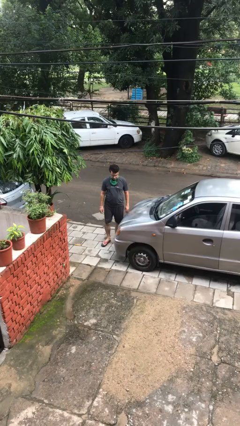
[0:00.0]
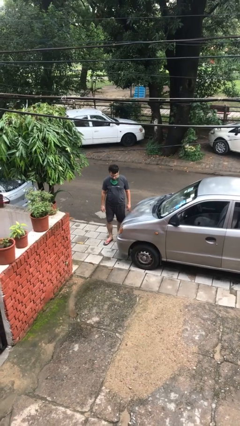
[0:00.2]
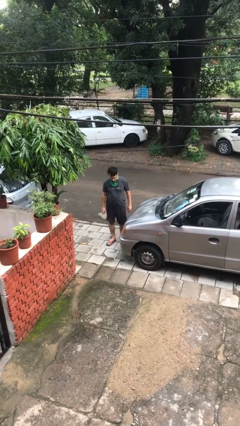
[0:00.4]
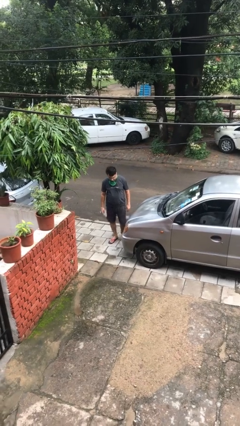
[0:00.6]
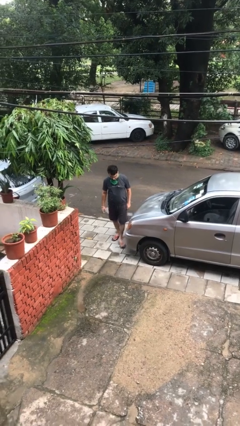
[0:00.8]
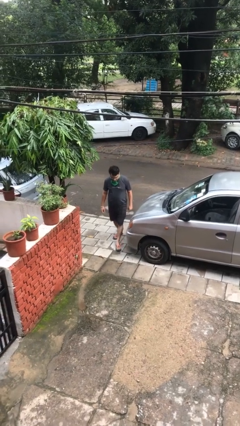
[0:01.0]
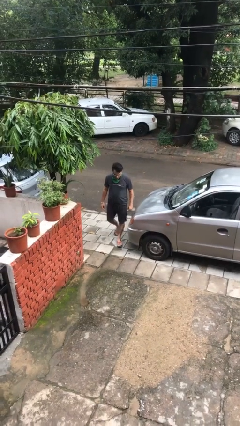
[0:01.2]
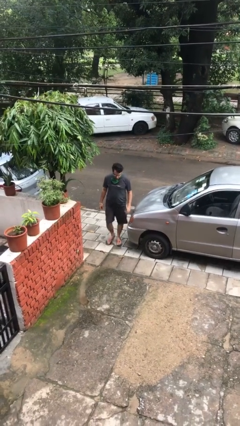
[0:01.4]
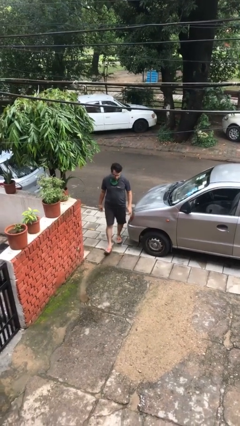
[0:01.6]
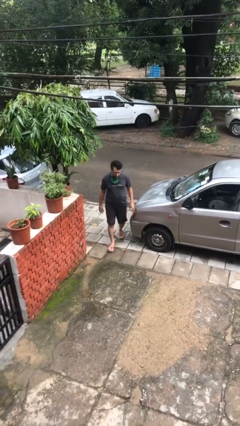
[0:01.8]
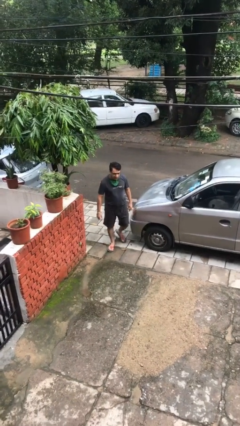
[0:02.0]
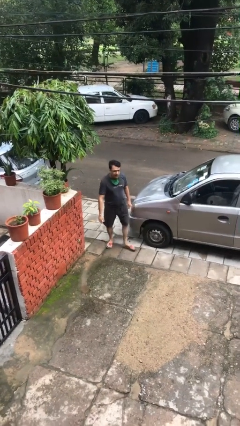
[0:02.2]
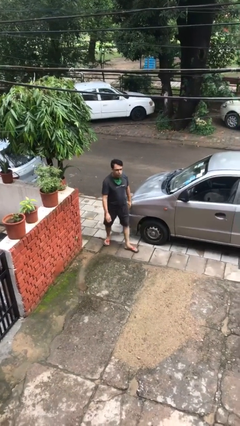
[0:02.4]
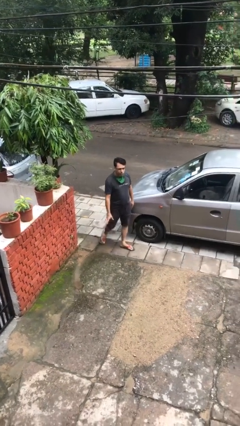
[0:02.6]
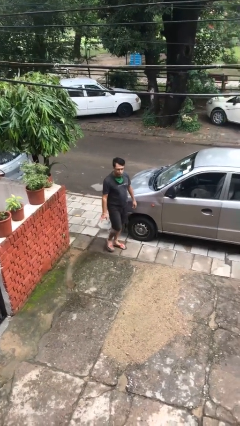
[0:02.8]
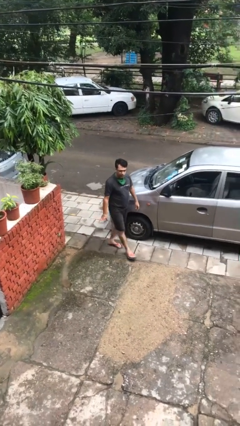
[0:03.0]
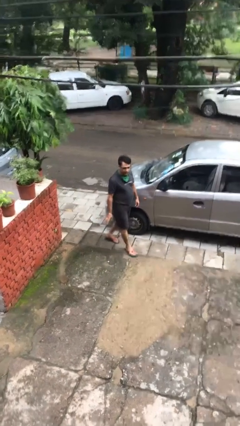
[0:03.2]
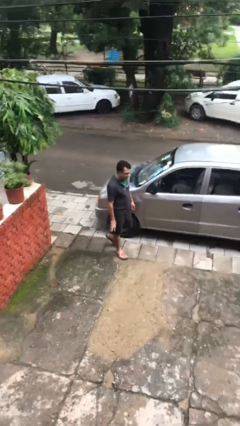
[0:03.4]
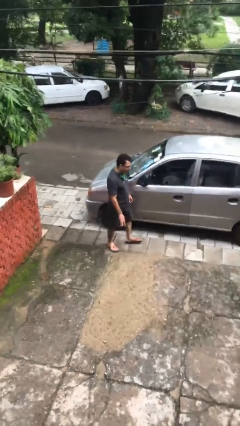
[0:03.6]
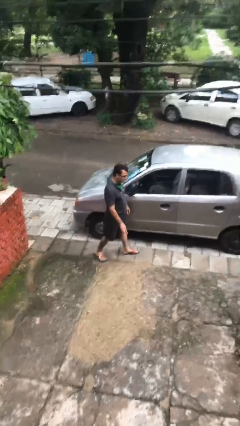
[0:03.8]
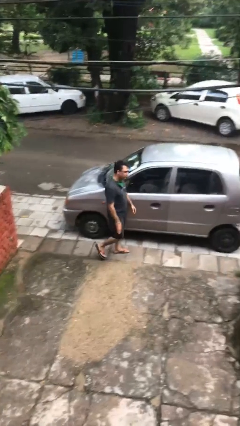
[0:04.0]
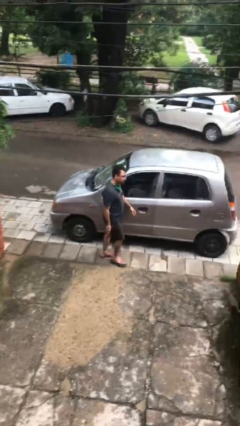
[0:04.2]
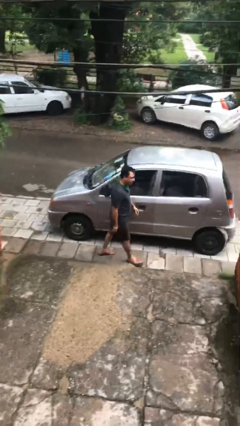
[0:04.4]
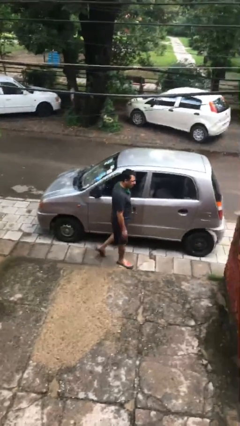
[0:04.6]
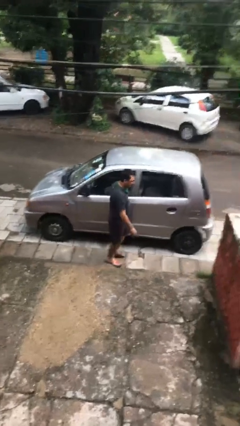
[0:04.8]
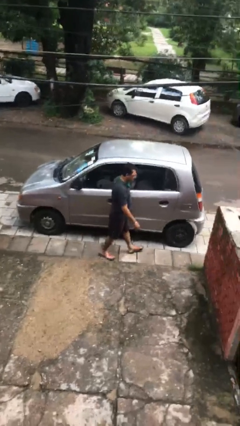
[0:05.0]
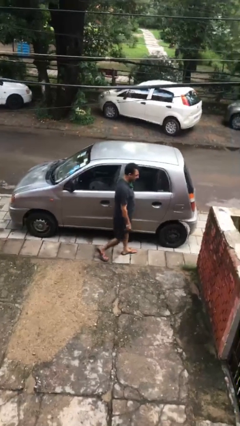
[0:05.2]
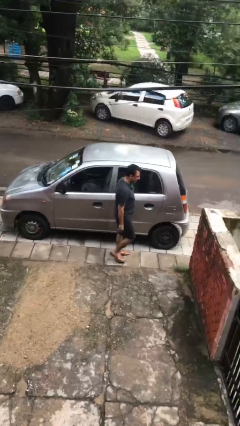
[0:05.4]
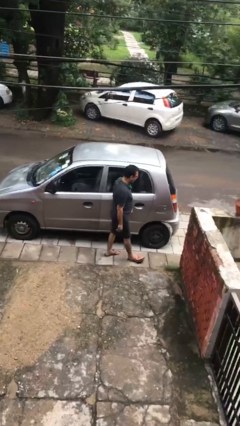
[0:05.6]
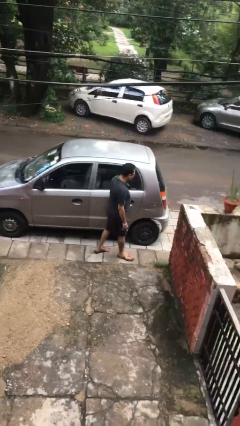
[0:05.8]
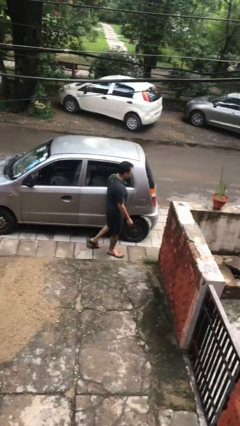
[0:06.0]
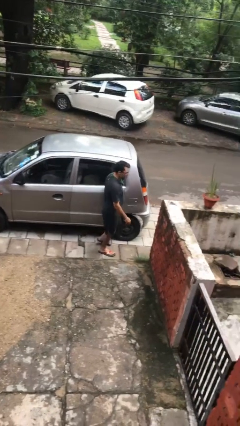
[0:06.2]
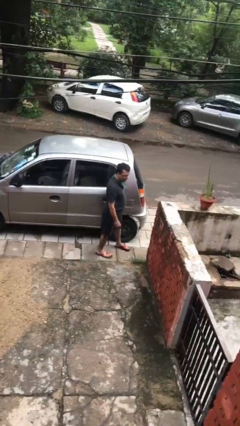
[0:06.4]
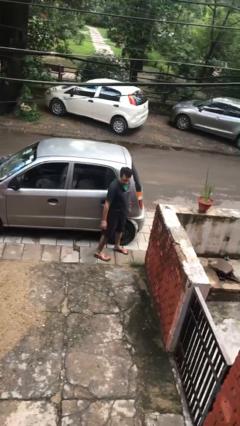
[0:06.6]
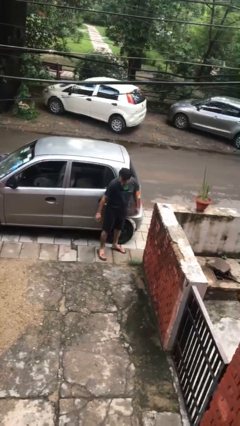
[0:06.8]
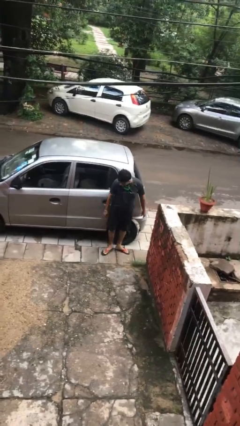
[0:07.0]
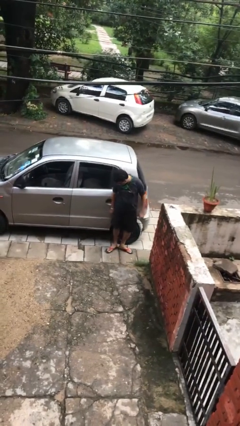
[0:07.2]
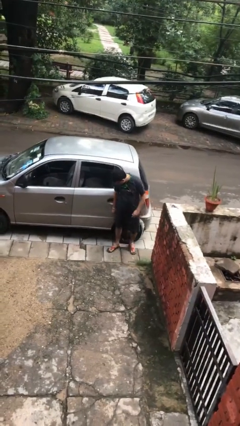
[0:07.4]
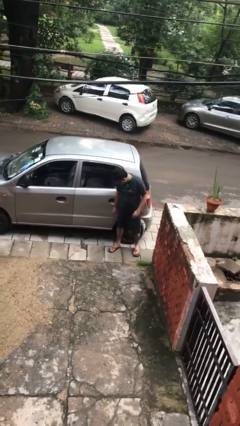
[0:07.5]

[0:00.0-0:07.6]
person walks around car

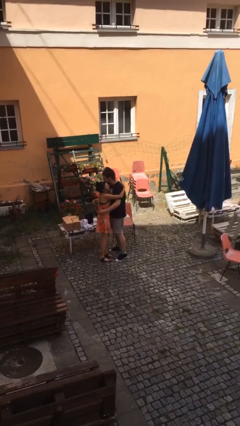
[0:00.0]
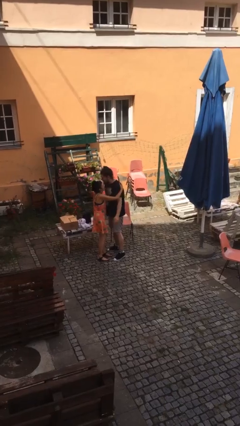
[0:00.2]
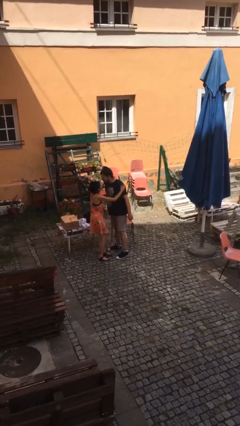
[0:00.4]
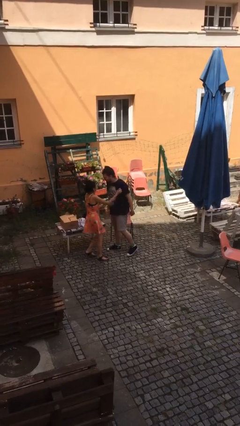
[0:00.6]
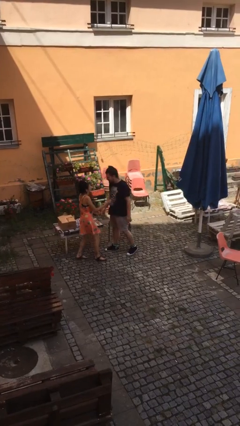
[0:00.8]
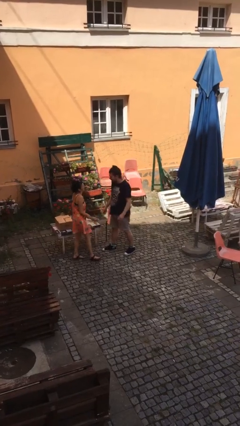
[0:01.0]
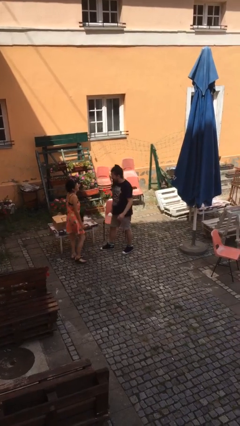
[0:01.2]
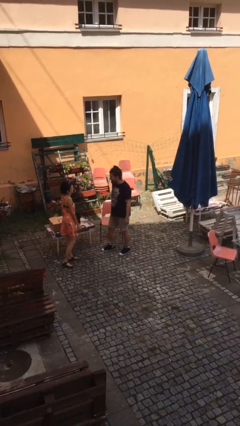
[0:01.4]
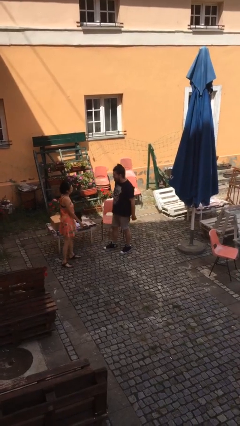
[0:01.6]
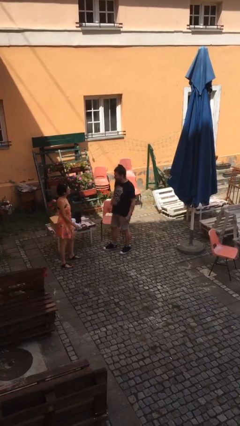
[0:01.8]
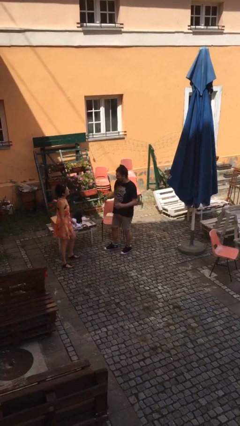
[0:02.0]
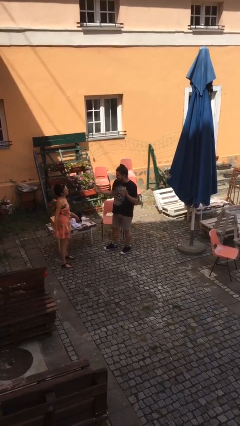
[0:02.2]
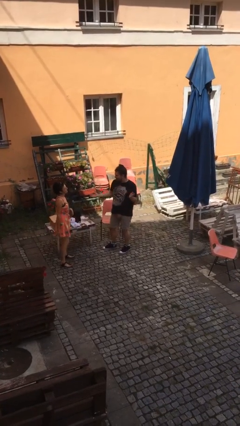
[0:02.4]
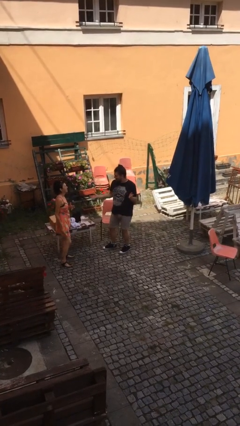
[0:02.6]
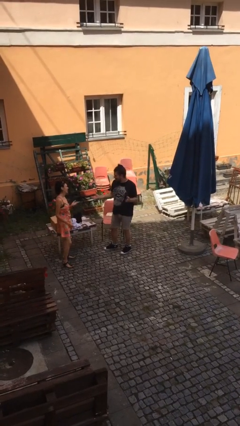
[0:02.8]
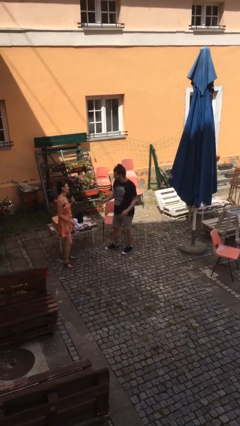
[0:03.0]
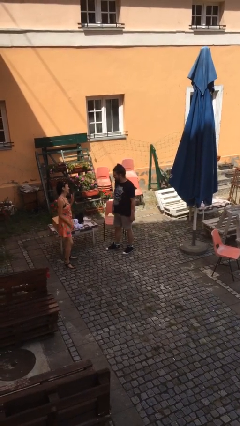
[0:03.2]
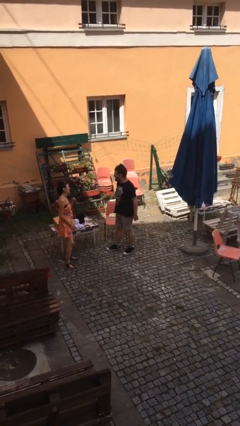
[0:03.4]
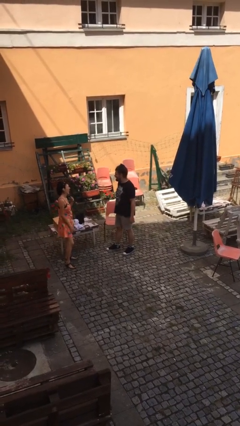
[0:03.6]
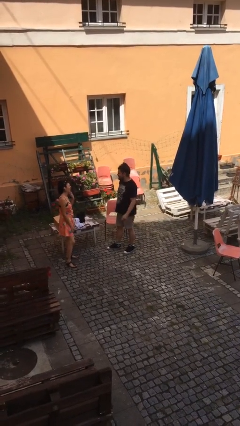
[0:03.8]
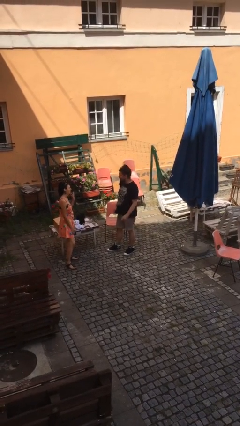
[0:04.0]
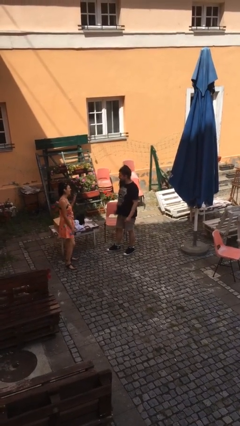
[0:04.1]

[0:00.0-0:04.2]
person talks to person

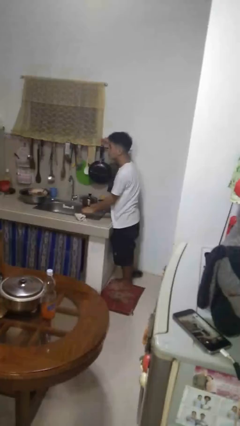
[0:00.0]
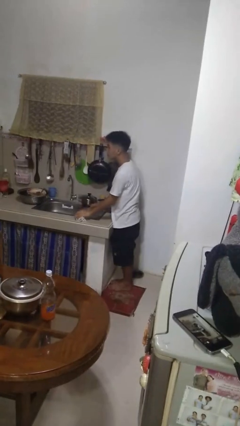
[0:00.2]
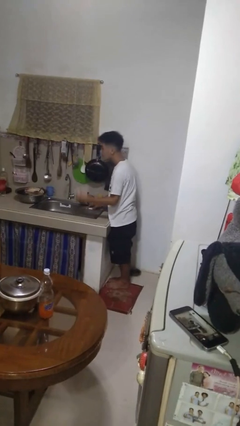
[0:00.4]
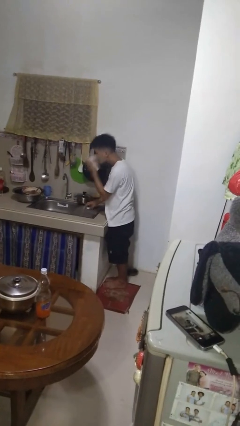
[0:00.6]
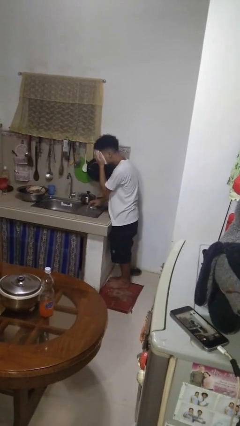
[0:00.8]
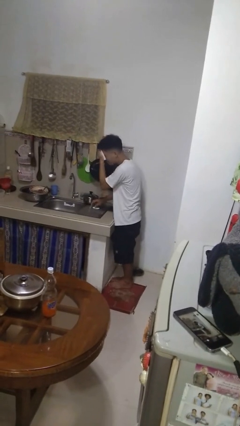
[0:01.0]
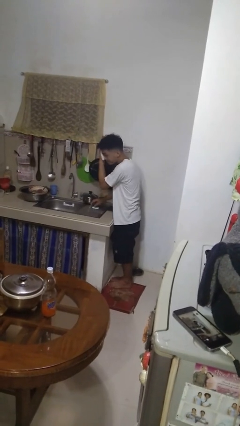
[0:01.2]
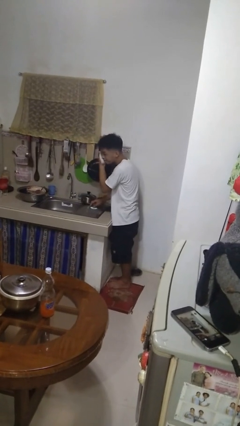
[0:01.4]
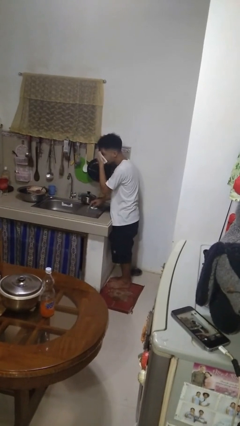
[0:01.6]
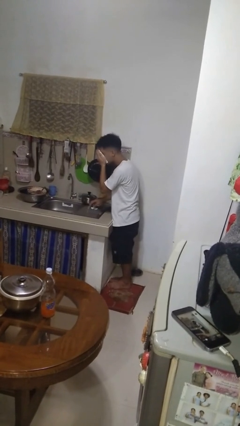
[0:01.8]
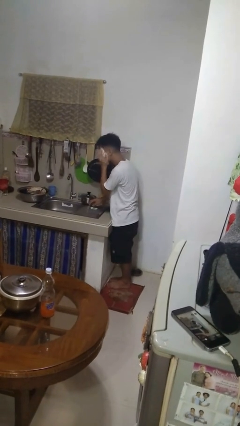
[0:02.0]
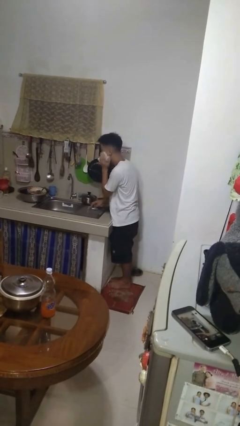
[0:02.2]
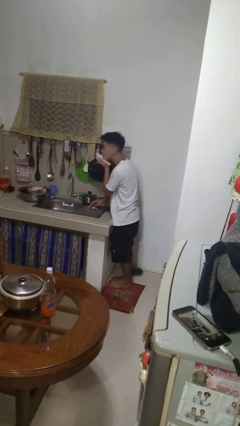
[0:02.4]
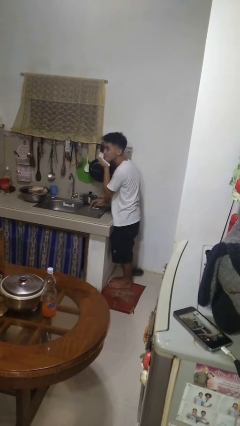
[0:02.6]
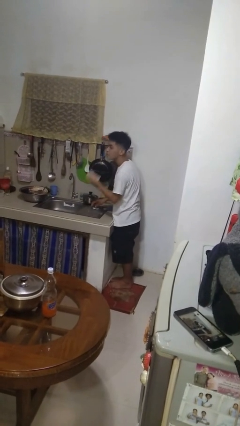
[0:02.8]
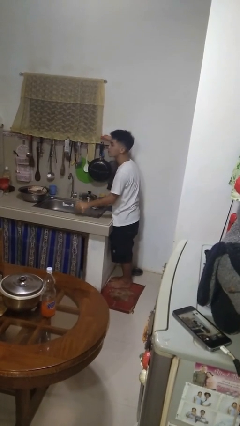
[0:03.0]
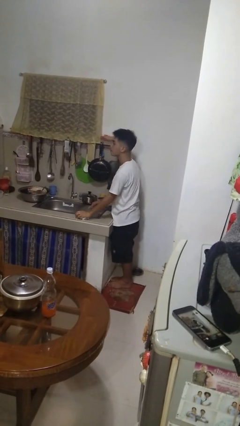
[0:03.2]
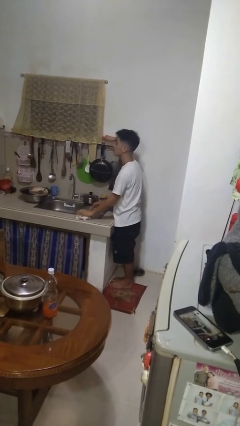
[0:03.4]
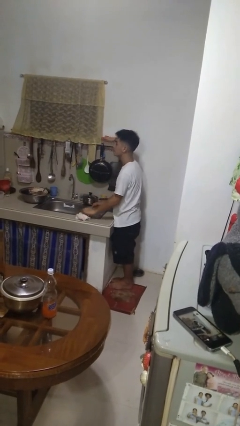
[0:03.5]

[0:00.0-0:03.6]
person dries face with towel

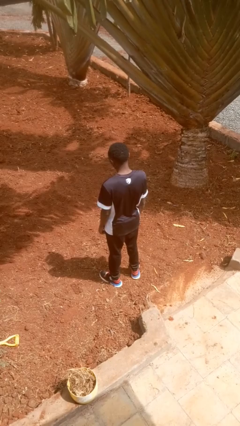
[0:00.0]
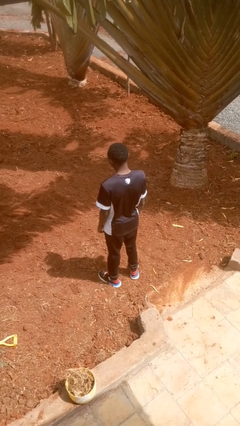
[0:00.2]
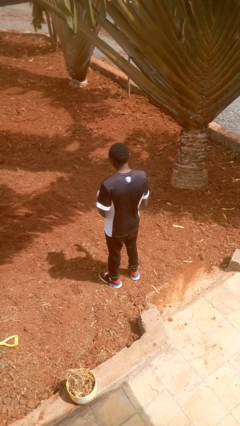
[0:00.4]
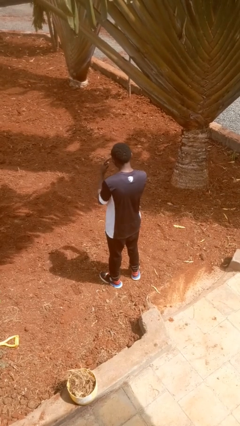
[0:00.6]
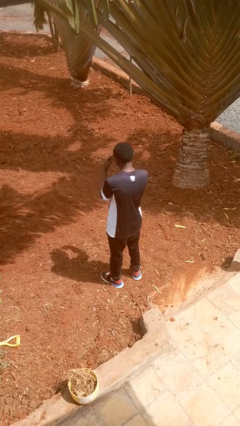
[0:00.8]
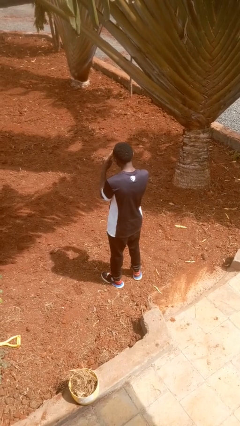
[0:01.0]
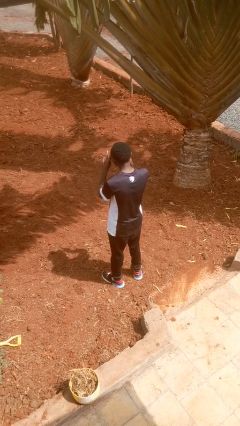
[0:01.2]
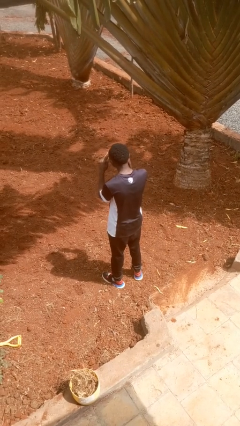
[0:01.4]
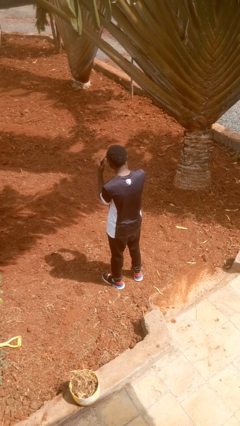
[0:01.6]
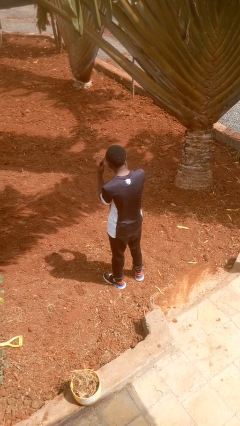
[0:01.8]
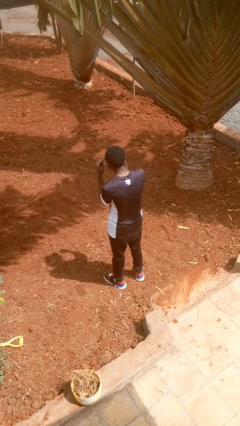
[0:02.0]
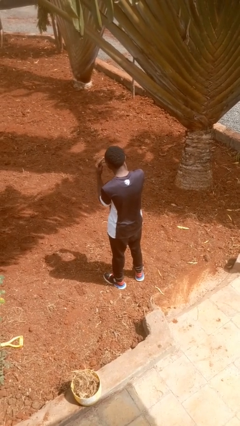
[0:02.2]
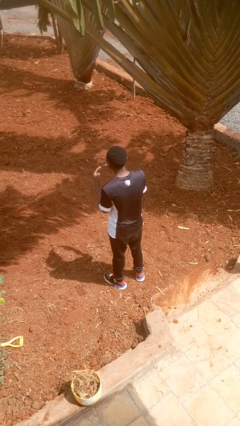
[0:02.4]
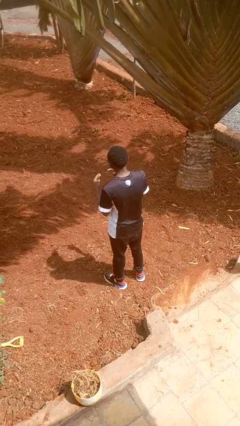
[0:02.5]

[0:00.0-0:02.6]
person gestures watch closely
